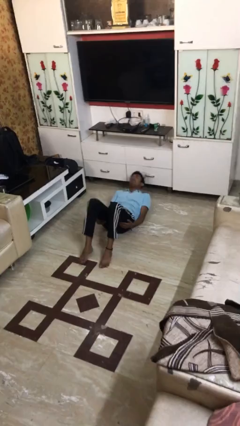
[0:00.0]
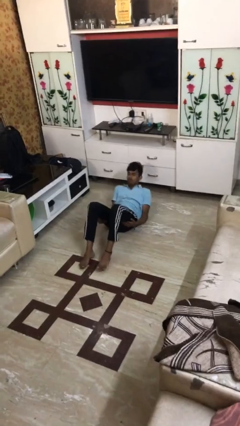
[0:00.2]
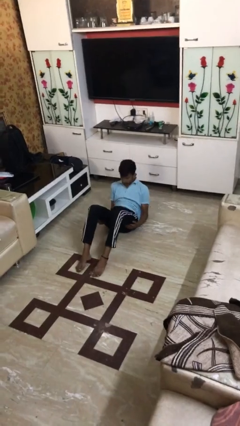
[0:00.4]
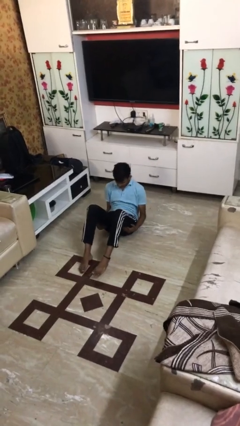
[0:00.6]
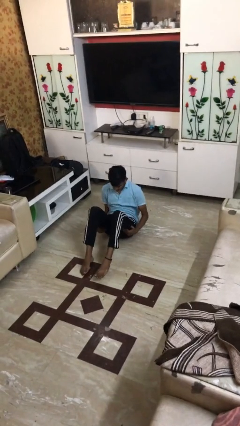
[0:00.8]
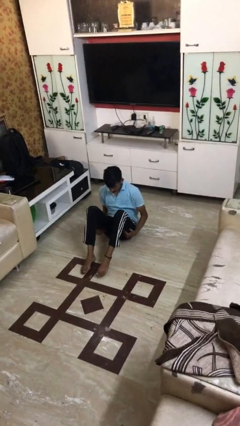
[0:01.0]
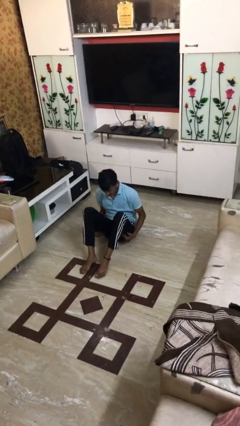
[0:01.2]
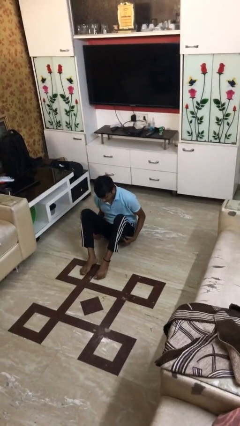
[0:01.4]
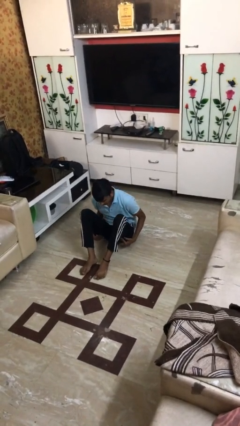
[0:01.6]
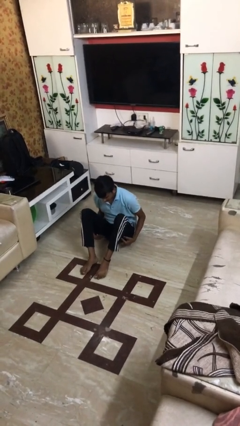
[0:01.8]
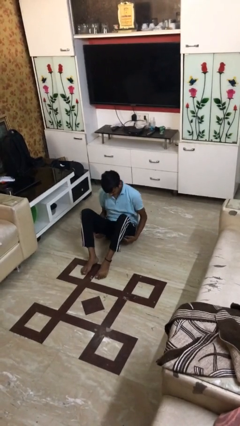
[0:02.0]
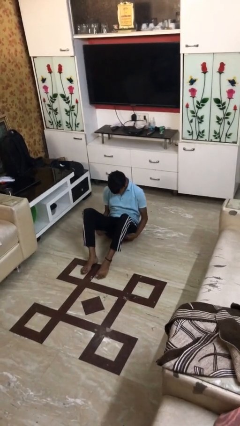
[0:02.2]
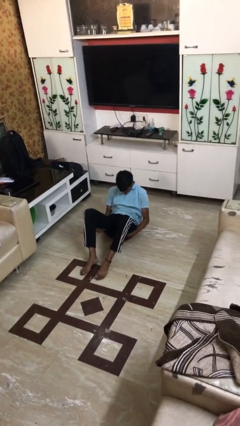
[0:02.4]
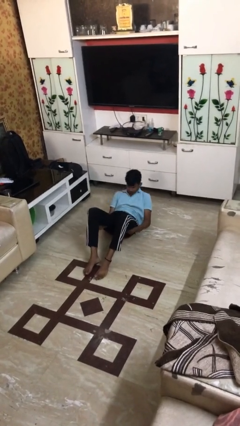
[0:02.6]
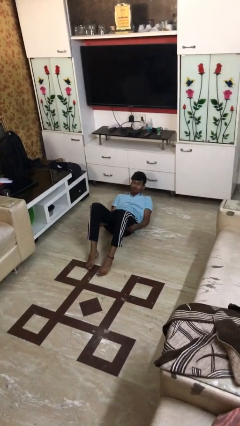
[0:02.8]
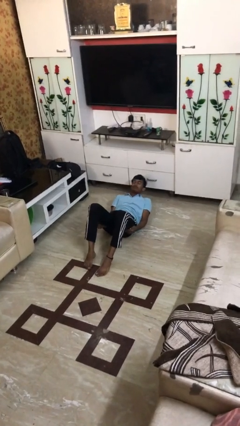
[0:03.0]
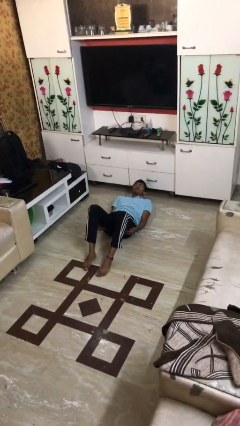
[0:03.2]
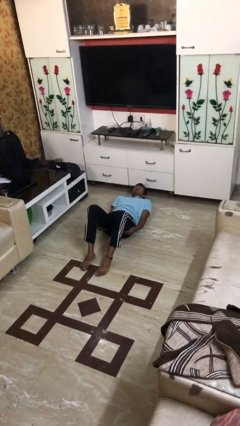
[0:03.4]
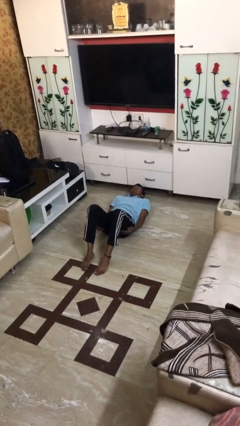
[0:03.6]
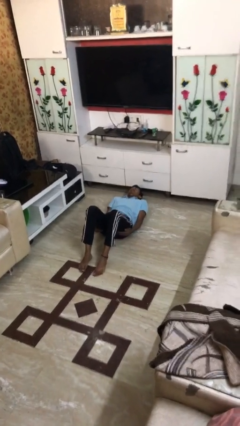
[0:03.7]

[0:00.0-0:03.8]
person exercises with situp

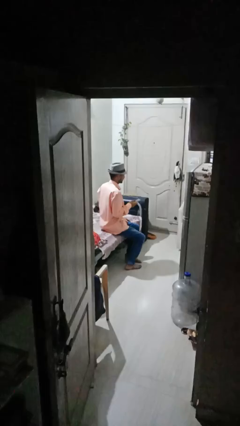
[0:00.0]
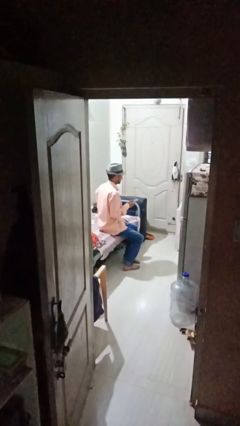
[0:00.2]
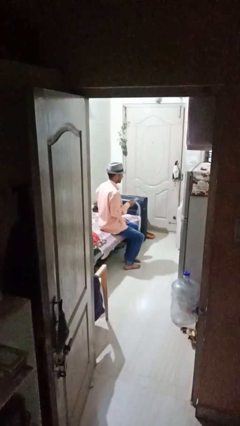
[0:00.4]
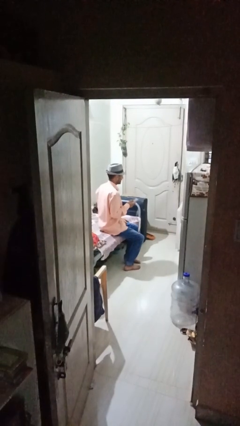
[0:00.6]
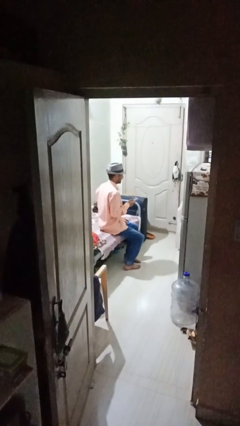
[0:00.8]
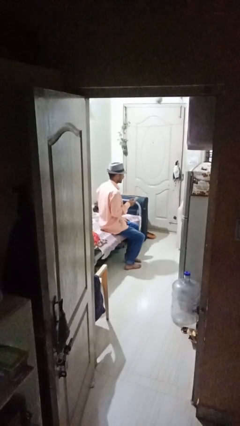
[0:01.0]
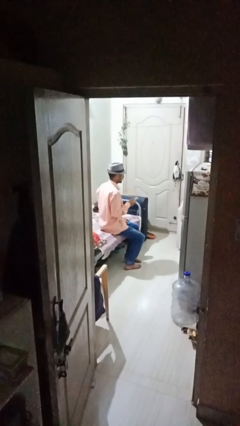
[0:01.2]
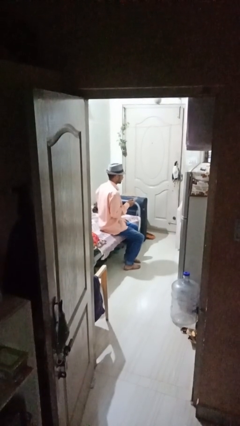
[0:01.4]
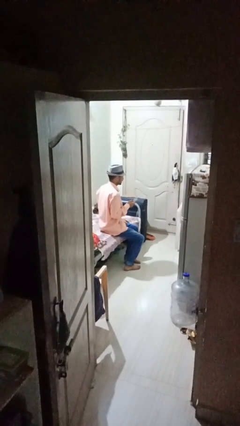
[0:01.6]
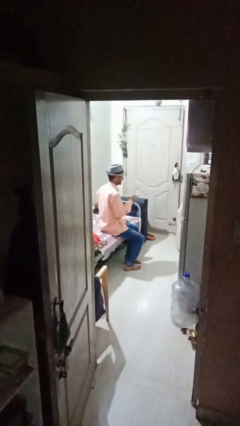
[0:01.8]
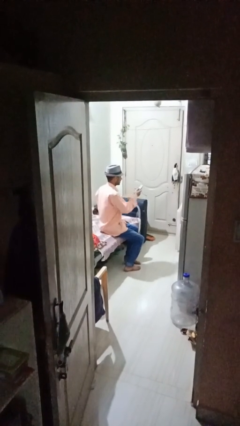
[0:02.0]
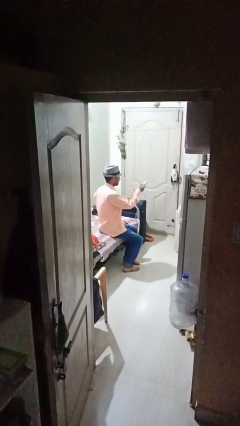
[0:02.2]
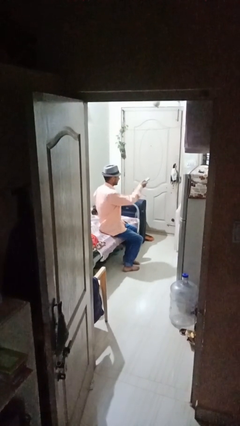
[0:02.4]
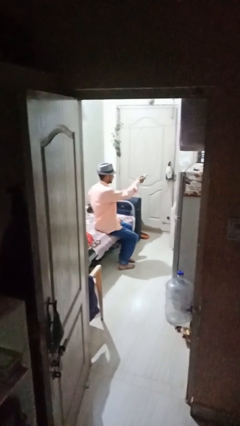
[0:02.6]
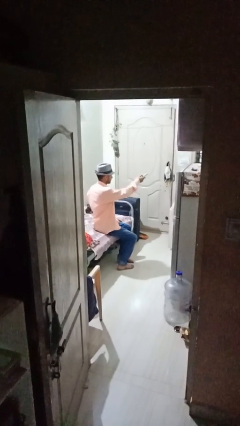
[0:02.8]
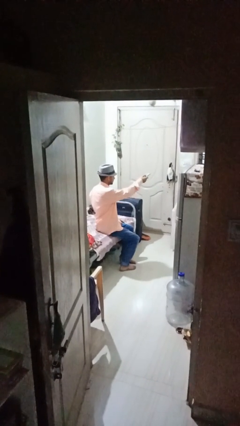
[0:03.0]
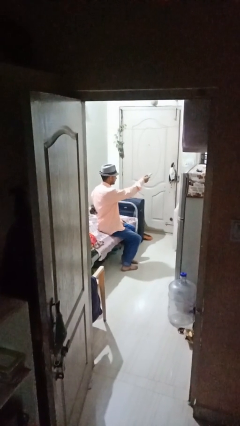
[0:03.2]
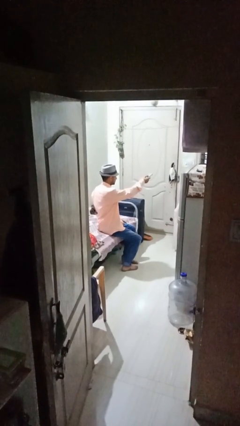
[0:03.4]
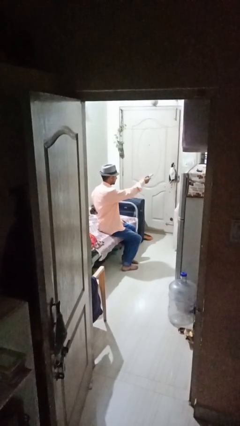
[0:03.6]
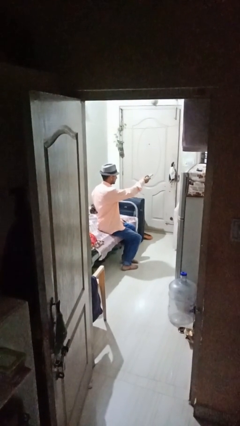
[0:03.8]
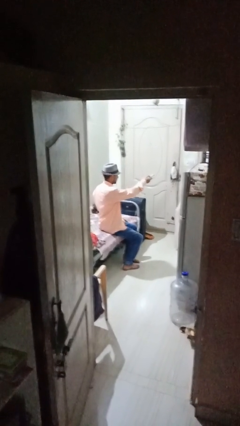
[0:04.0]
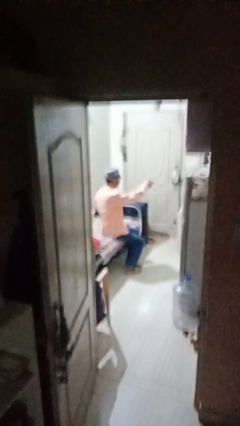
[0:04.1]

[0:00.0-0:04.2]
person uses television remote

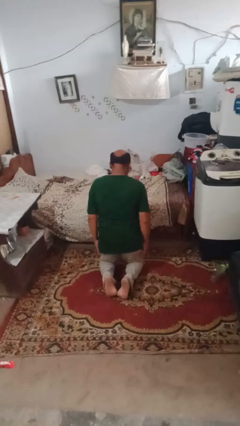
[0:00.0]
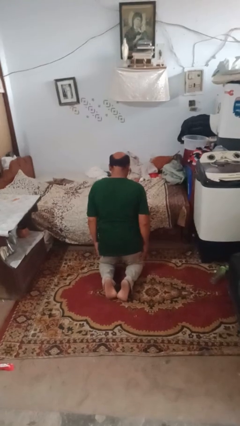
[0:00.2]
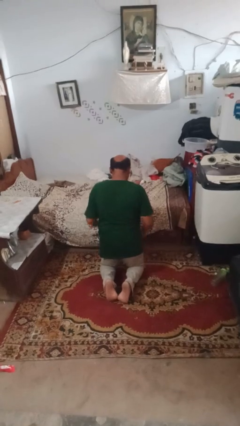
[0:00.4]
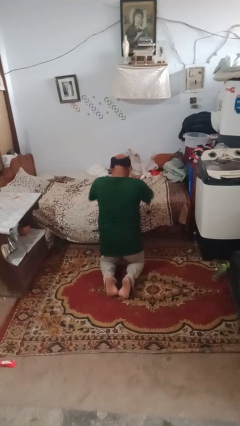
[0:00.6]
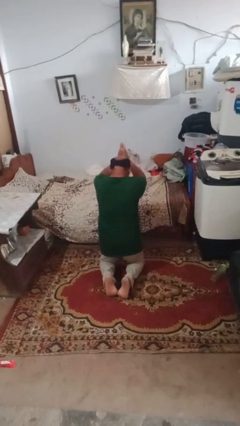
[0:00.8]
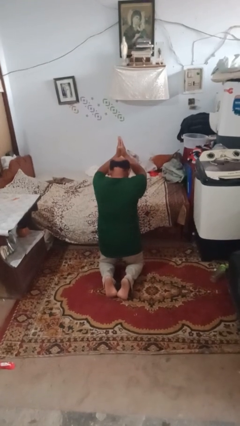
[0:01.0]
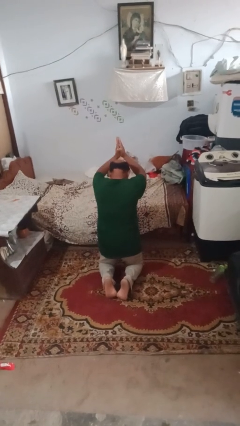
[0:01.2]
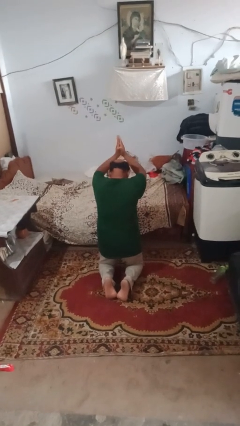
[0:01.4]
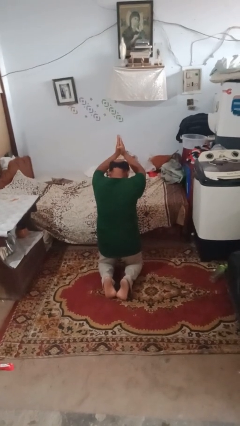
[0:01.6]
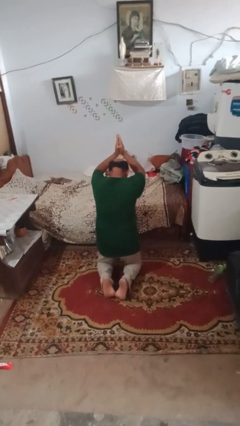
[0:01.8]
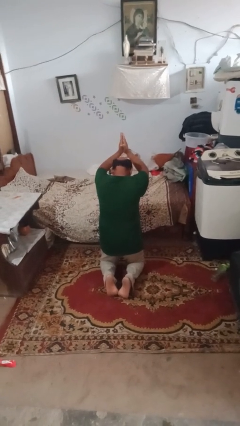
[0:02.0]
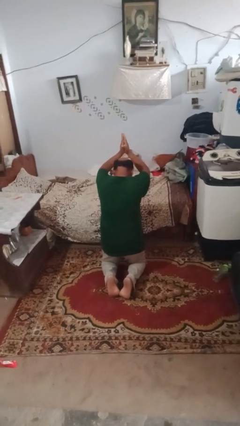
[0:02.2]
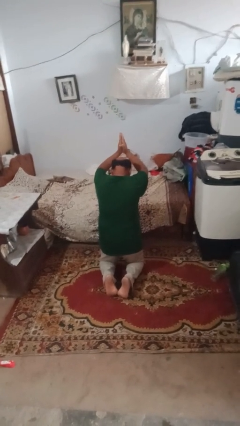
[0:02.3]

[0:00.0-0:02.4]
person prays

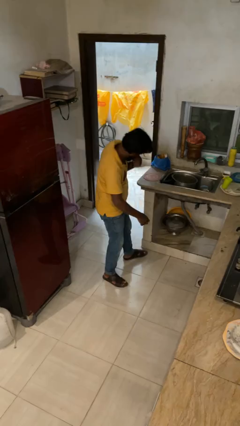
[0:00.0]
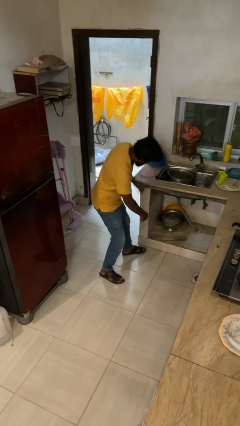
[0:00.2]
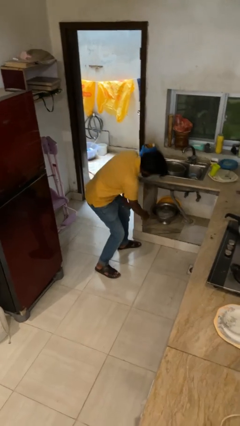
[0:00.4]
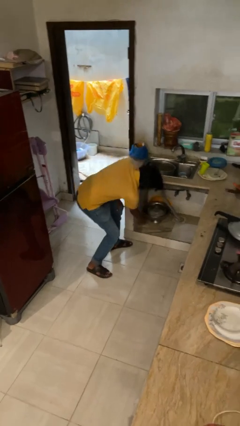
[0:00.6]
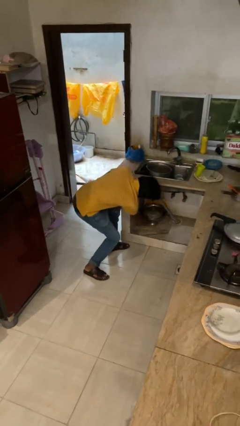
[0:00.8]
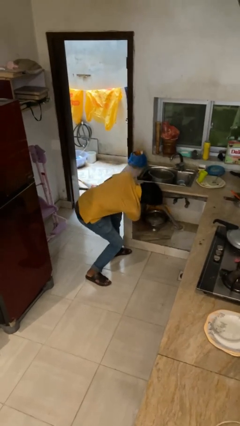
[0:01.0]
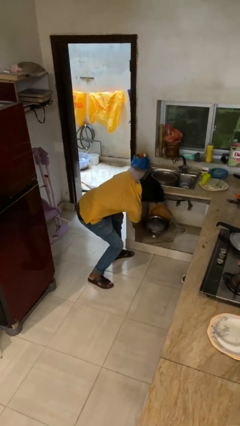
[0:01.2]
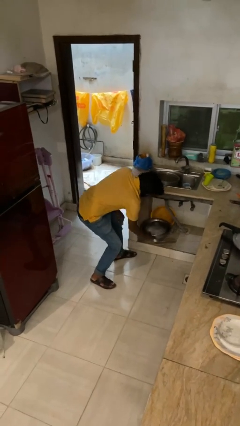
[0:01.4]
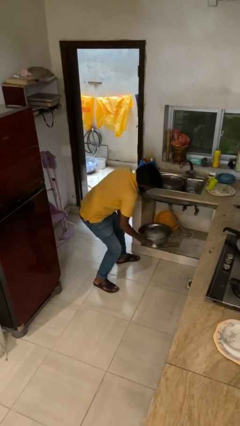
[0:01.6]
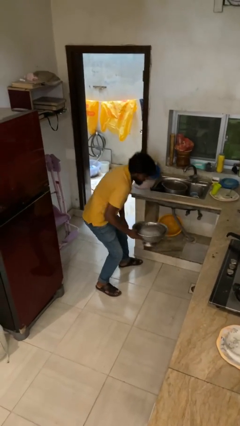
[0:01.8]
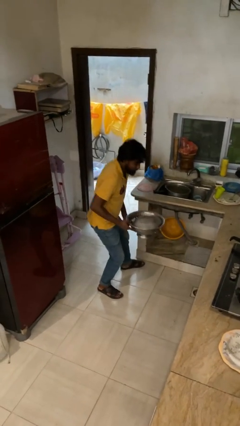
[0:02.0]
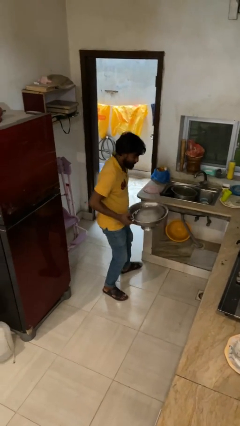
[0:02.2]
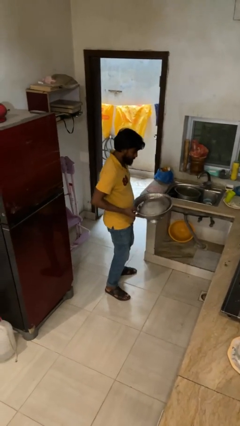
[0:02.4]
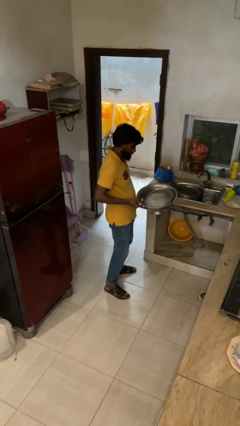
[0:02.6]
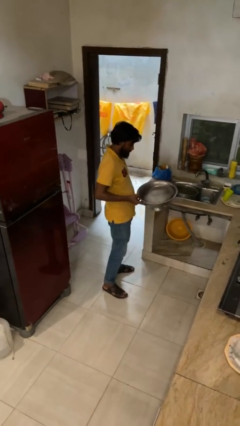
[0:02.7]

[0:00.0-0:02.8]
person picks up object from cabinet

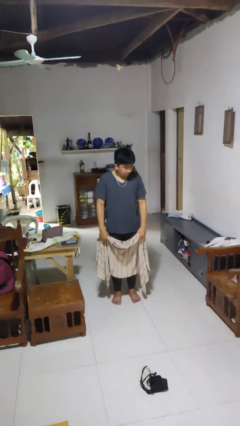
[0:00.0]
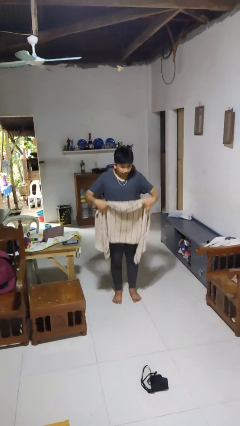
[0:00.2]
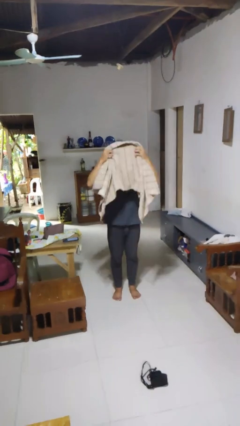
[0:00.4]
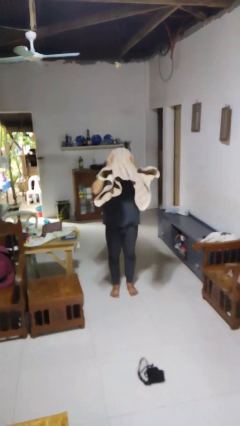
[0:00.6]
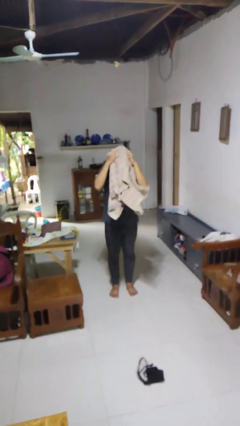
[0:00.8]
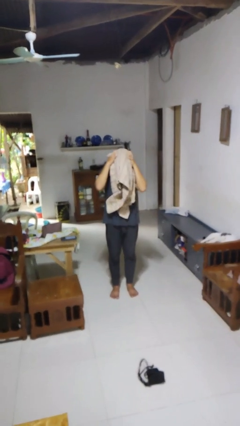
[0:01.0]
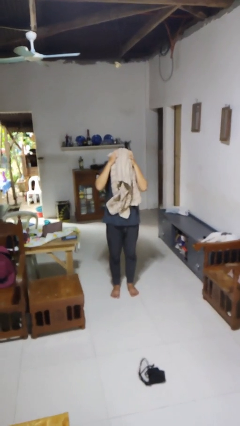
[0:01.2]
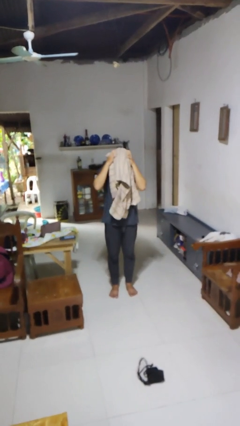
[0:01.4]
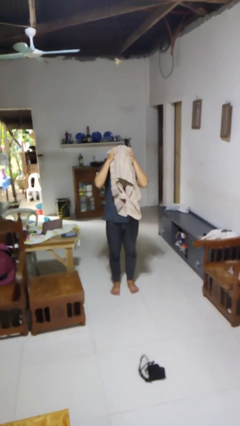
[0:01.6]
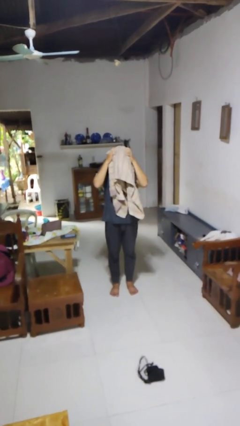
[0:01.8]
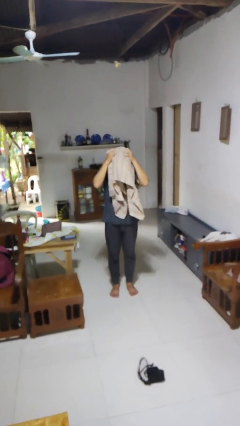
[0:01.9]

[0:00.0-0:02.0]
person dries hair with towel

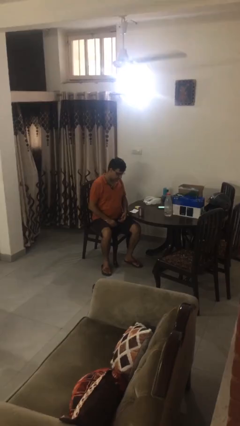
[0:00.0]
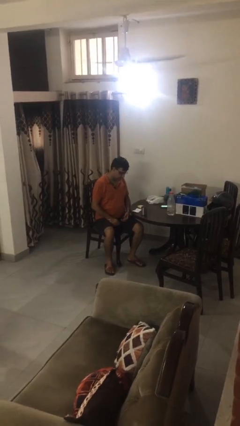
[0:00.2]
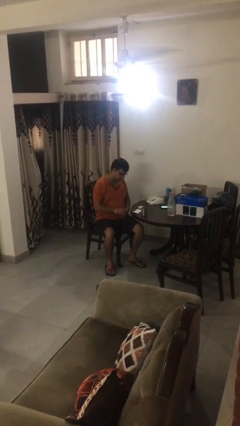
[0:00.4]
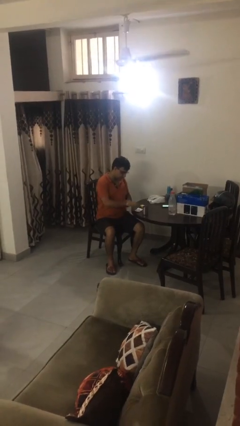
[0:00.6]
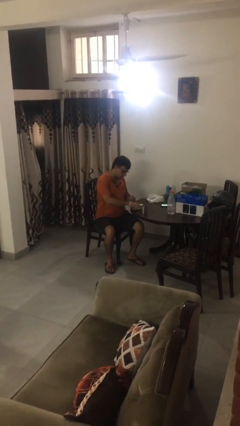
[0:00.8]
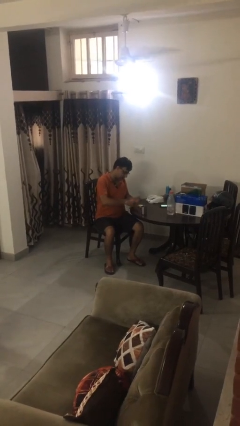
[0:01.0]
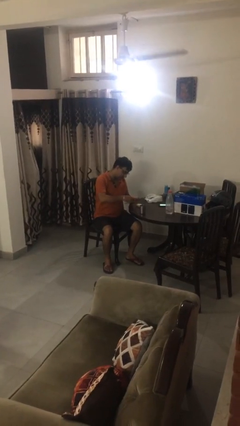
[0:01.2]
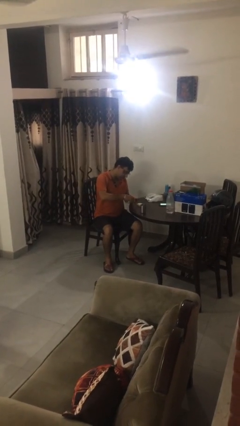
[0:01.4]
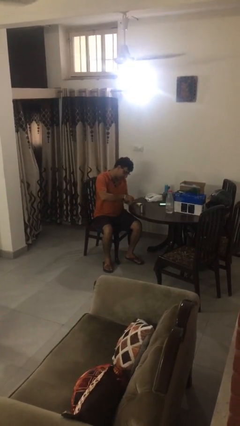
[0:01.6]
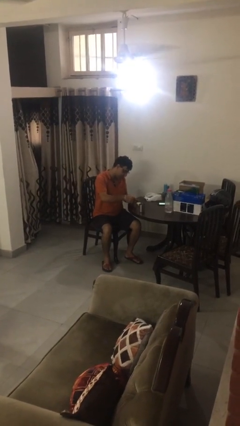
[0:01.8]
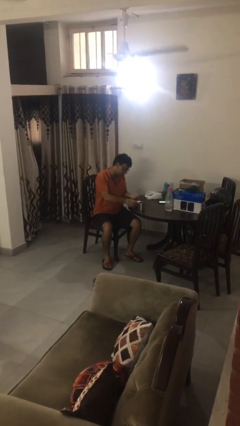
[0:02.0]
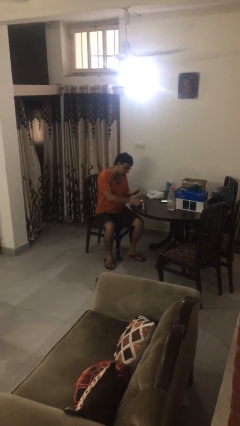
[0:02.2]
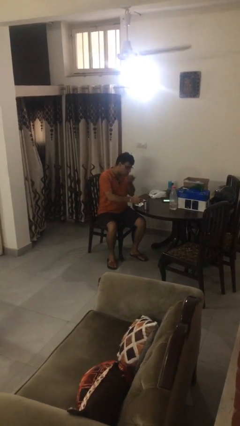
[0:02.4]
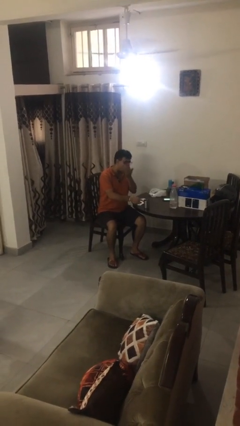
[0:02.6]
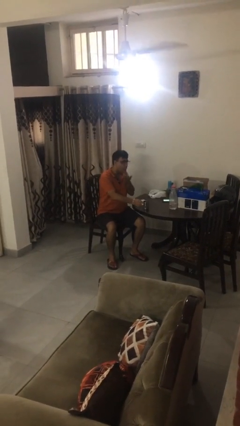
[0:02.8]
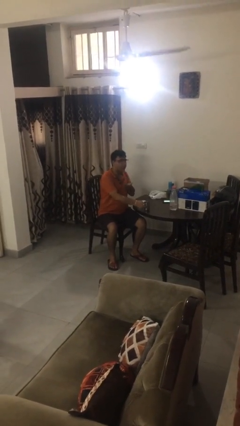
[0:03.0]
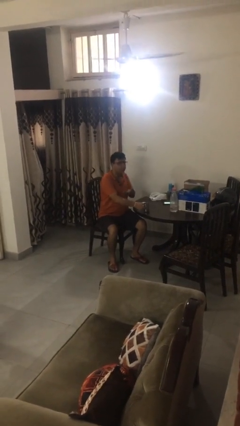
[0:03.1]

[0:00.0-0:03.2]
person takes medicine pills
